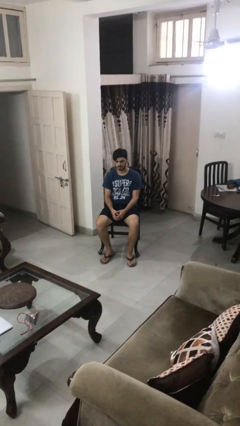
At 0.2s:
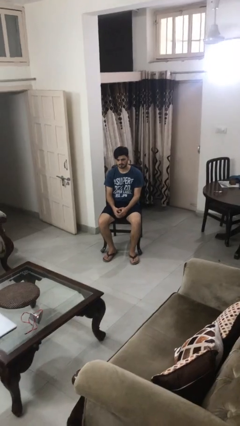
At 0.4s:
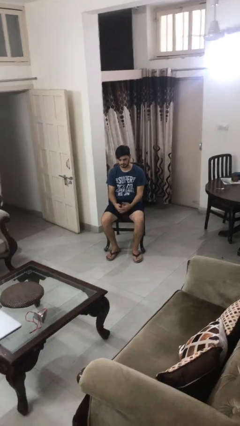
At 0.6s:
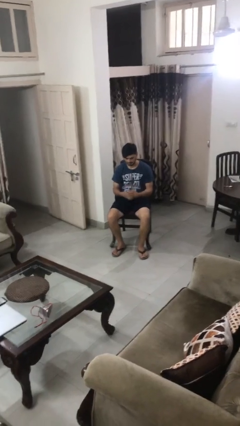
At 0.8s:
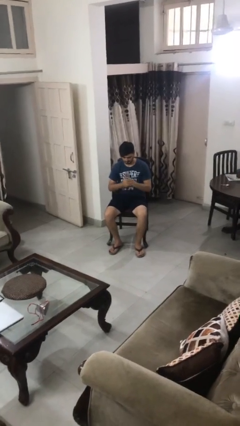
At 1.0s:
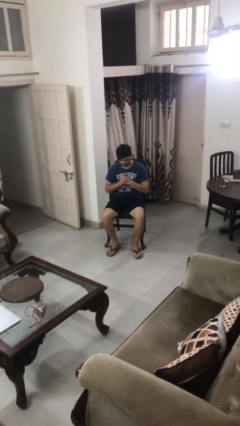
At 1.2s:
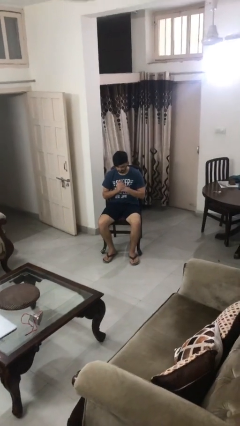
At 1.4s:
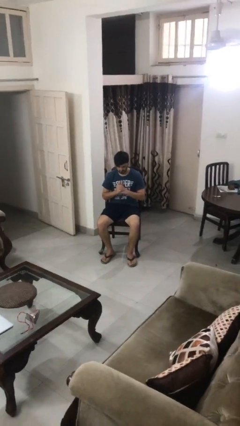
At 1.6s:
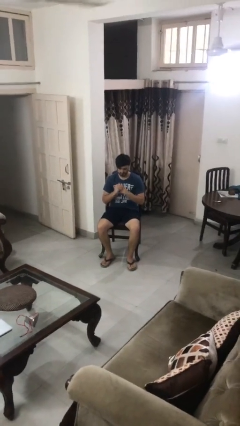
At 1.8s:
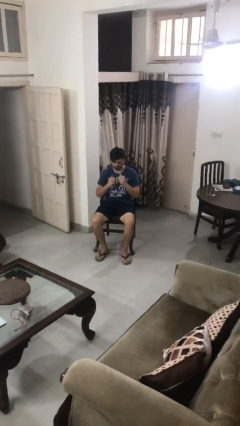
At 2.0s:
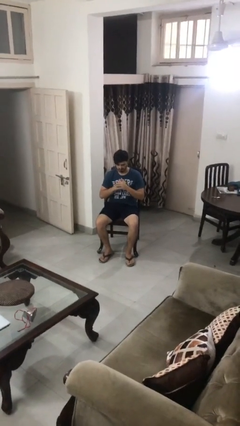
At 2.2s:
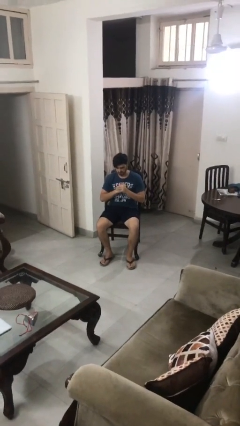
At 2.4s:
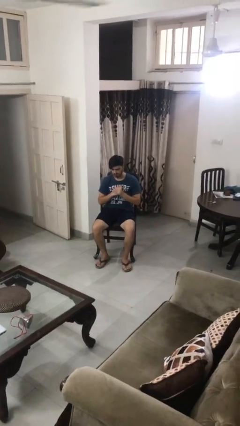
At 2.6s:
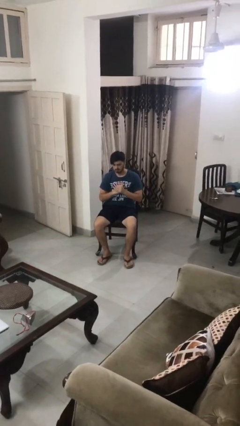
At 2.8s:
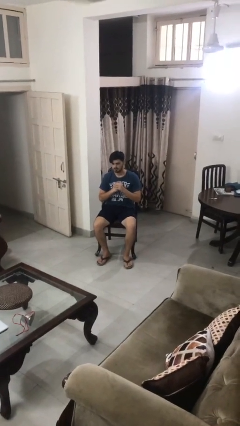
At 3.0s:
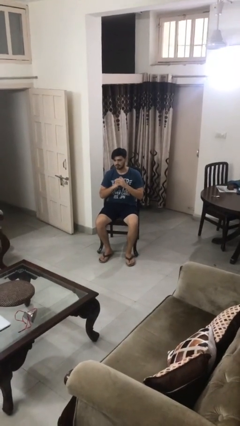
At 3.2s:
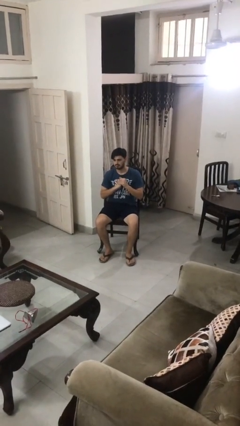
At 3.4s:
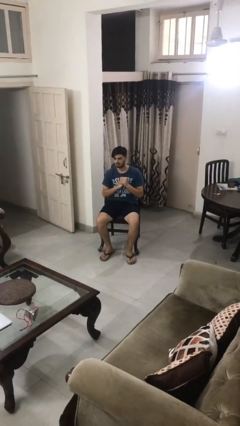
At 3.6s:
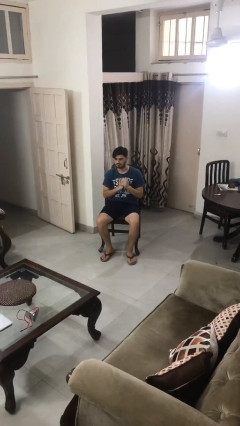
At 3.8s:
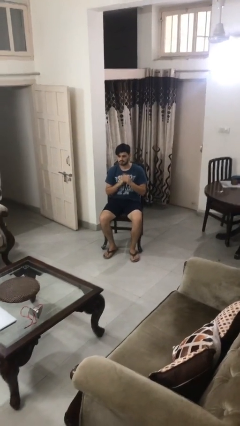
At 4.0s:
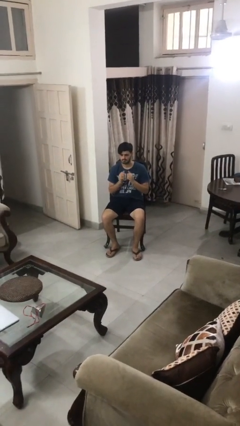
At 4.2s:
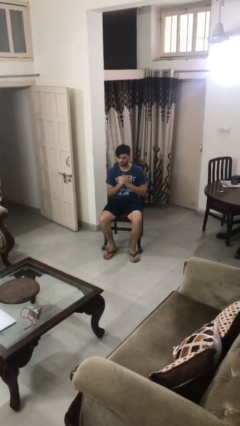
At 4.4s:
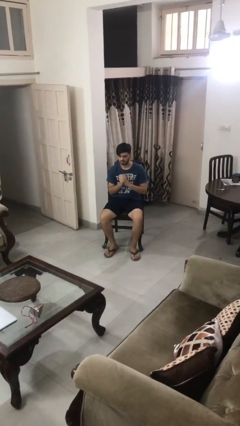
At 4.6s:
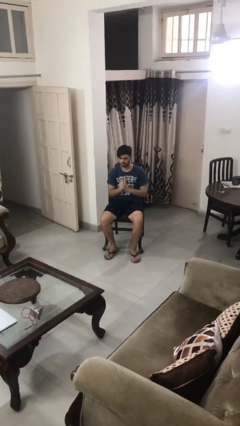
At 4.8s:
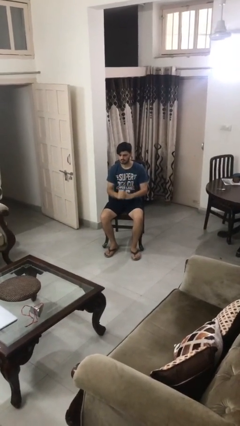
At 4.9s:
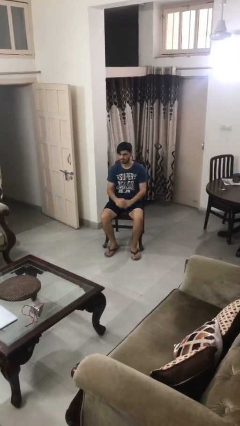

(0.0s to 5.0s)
person cracks knuckles

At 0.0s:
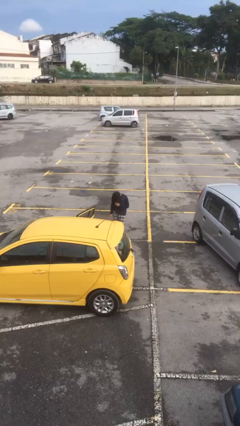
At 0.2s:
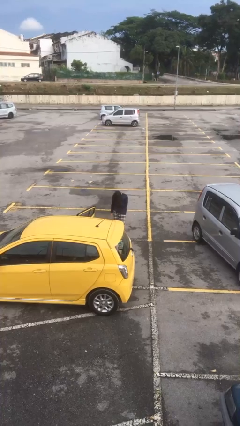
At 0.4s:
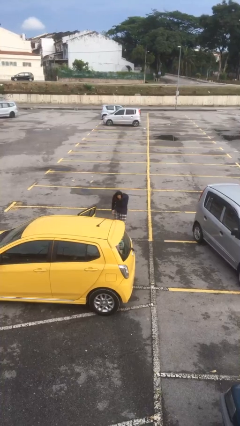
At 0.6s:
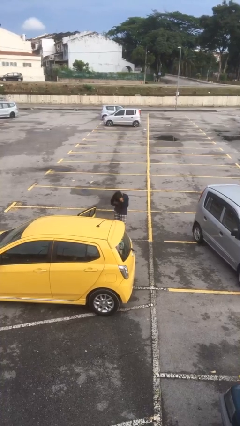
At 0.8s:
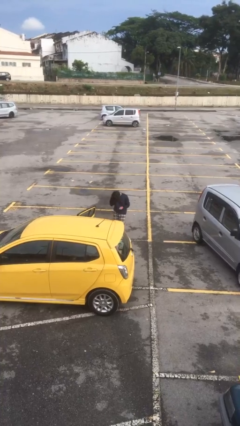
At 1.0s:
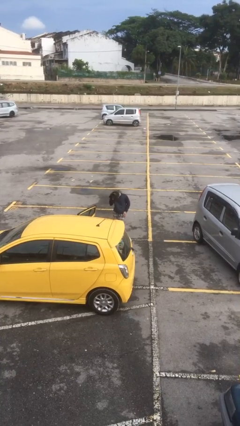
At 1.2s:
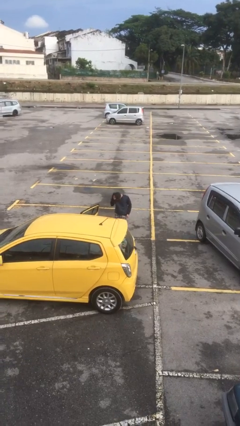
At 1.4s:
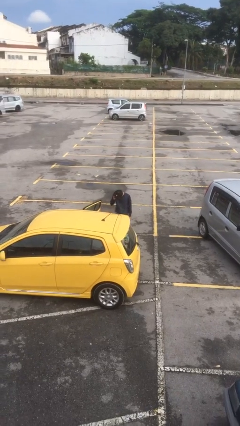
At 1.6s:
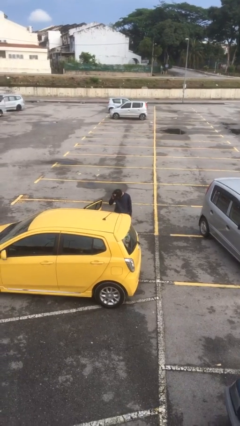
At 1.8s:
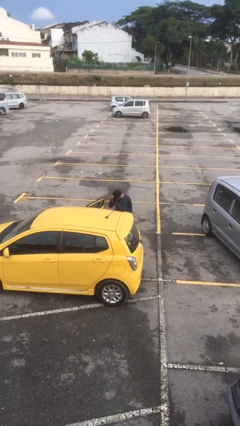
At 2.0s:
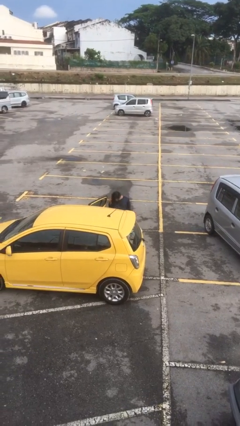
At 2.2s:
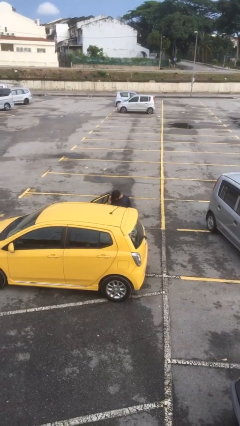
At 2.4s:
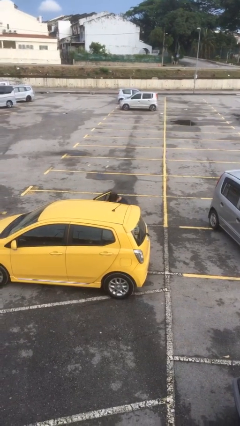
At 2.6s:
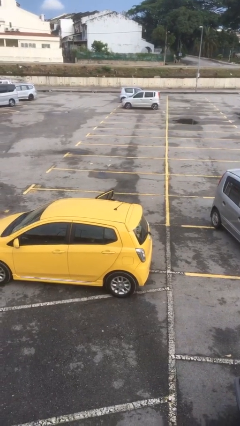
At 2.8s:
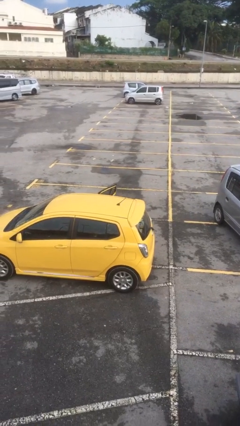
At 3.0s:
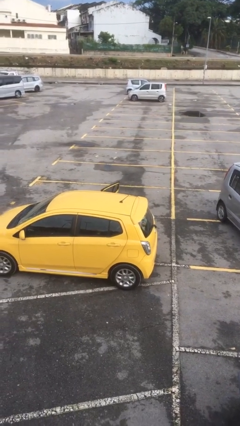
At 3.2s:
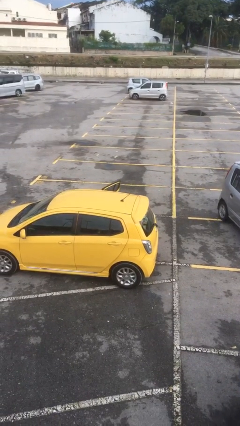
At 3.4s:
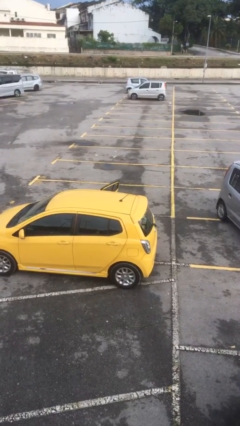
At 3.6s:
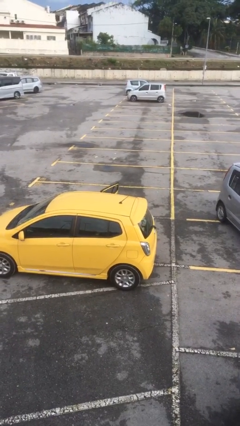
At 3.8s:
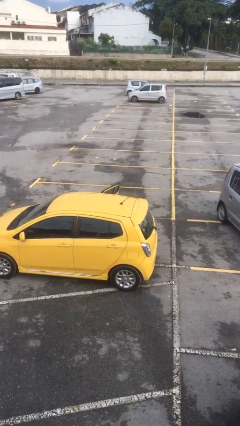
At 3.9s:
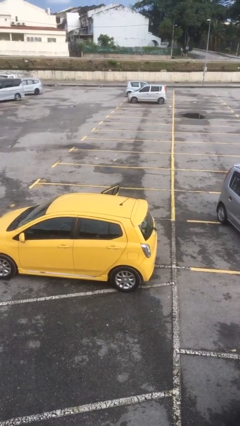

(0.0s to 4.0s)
person enters car

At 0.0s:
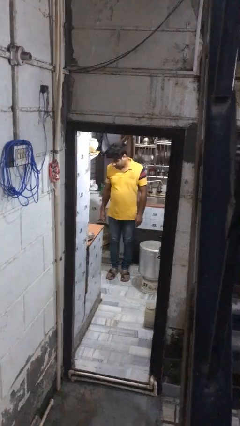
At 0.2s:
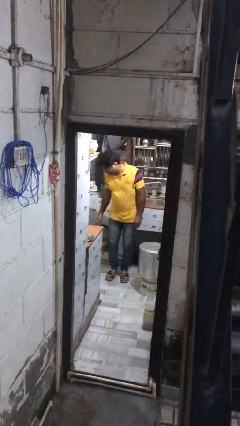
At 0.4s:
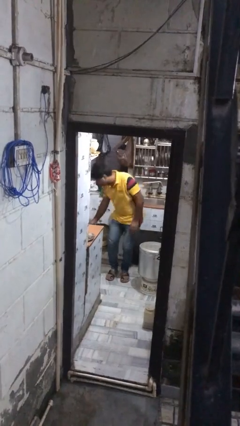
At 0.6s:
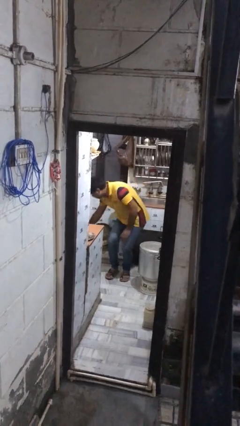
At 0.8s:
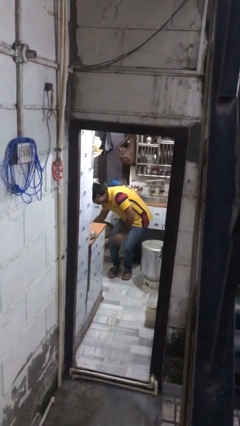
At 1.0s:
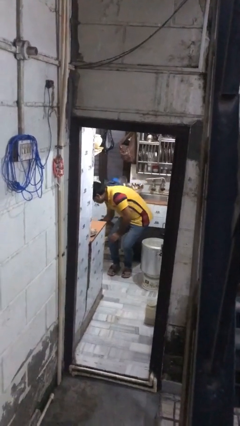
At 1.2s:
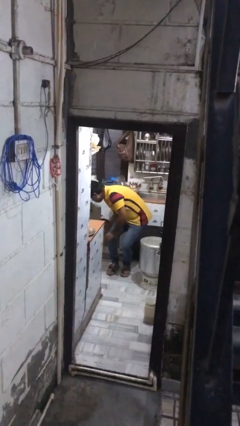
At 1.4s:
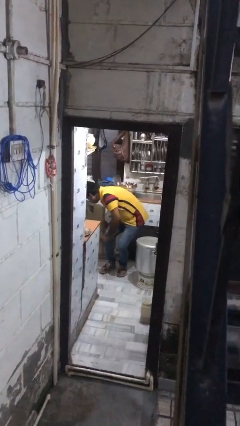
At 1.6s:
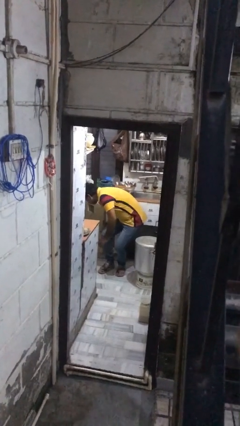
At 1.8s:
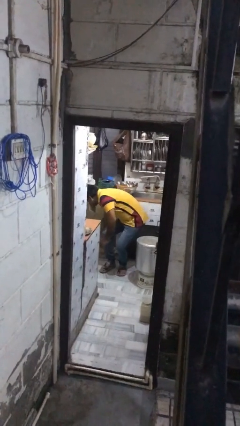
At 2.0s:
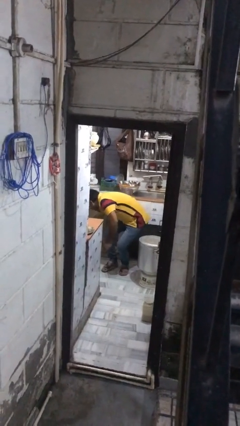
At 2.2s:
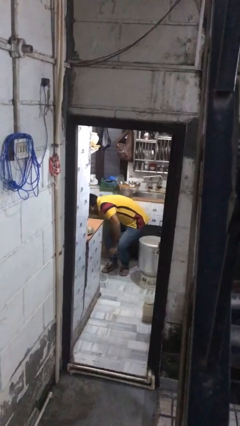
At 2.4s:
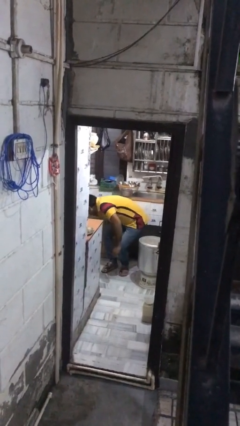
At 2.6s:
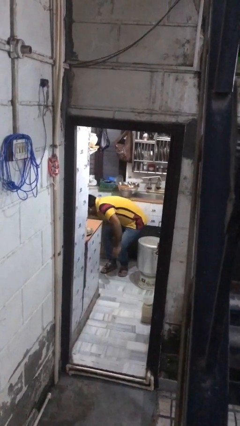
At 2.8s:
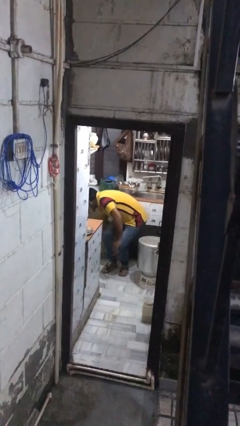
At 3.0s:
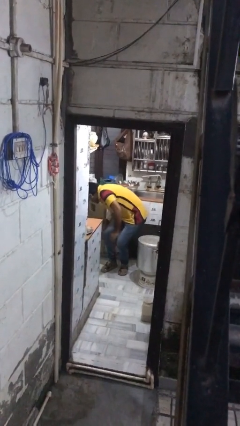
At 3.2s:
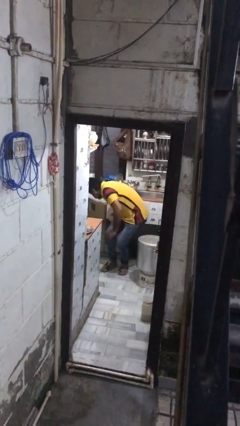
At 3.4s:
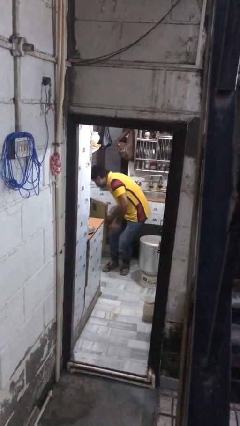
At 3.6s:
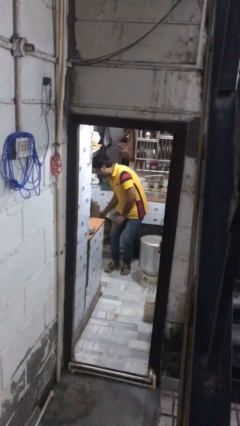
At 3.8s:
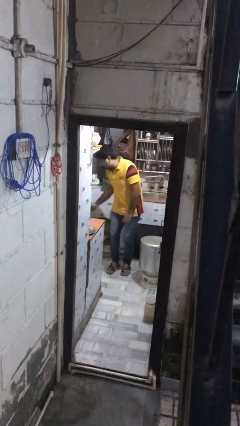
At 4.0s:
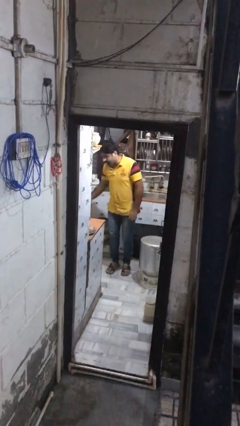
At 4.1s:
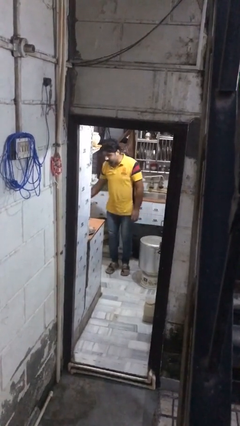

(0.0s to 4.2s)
person searches in kitchen drawer

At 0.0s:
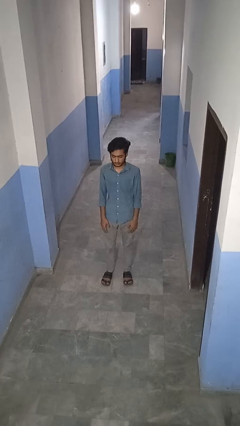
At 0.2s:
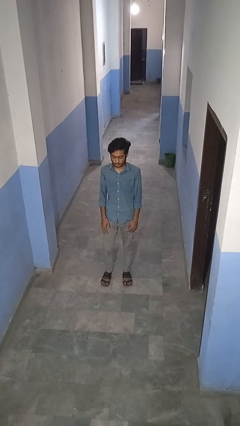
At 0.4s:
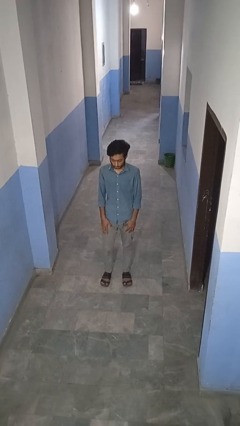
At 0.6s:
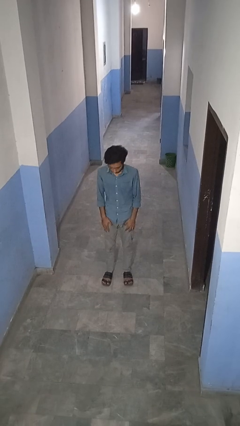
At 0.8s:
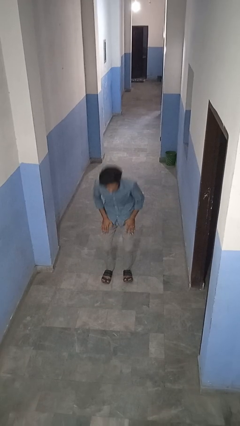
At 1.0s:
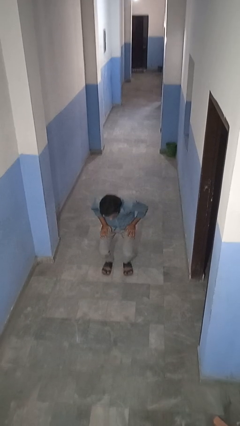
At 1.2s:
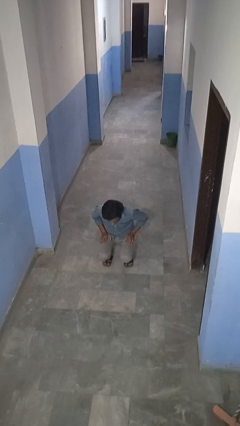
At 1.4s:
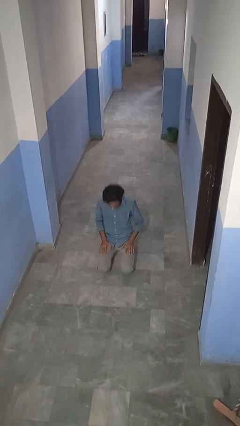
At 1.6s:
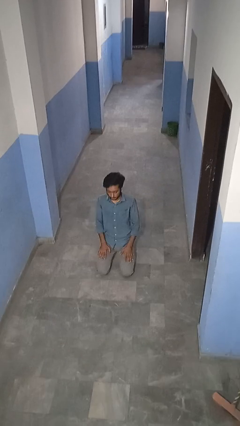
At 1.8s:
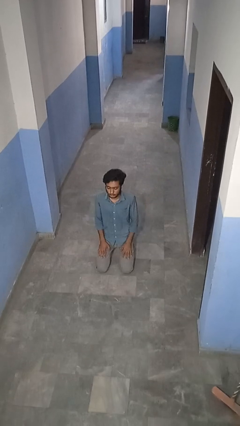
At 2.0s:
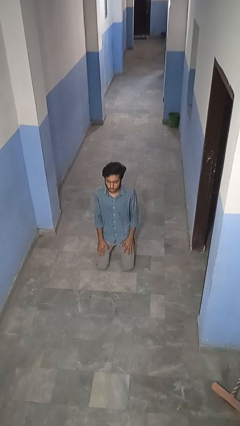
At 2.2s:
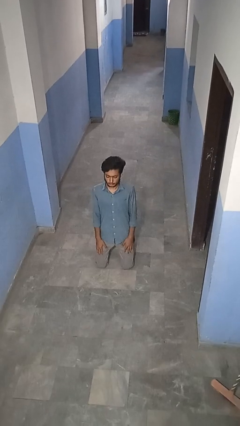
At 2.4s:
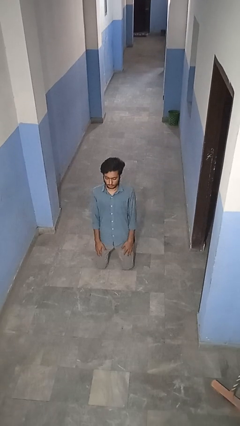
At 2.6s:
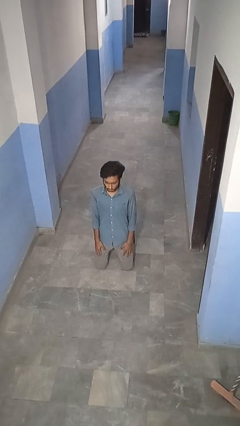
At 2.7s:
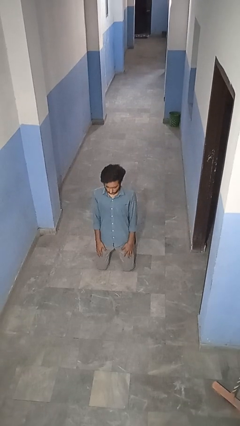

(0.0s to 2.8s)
person kneels

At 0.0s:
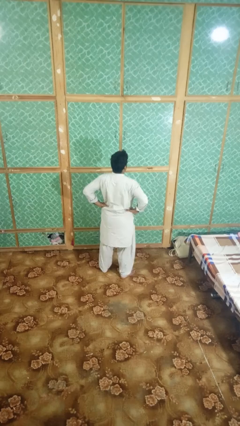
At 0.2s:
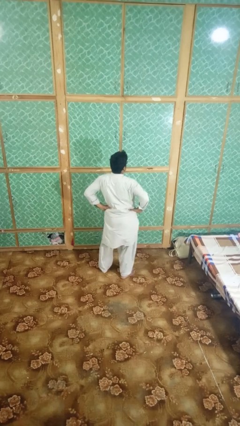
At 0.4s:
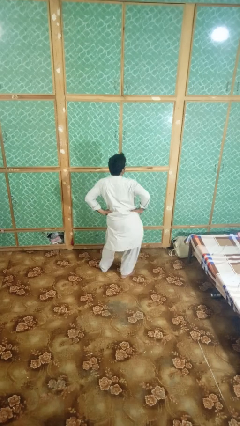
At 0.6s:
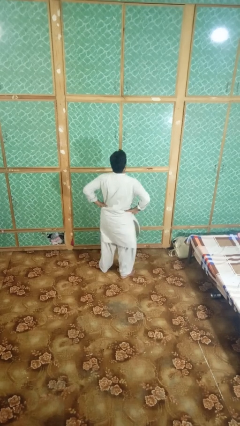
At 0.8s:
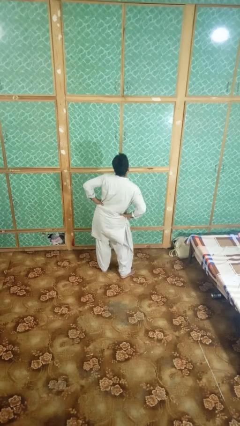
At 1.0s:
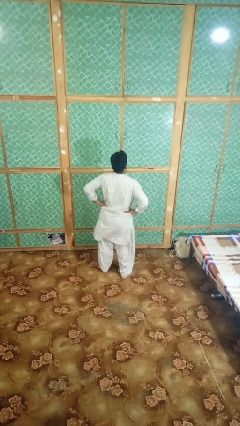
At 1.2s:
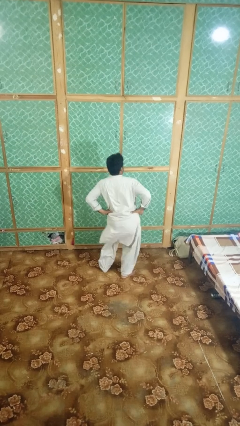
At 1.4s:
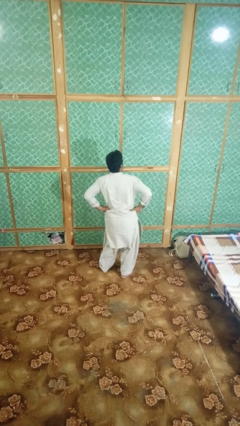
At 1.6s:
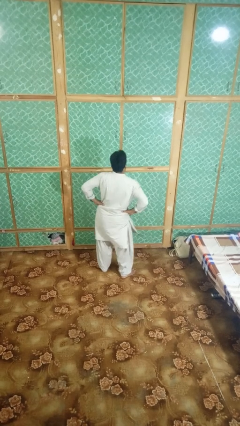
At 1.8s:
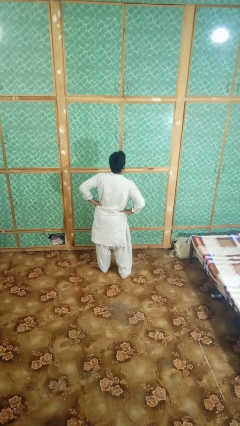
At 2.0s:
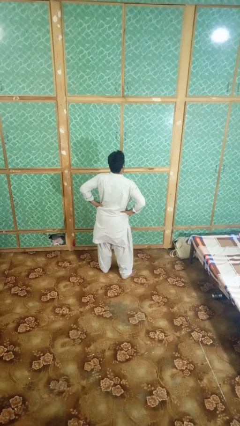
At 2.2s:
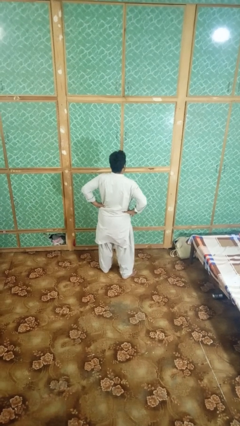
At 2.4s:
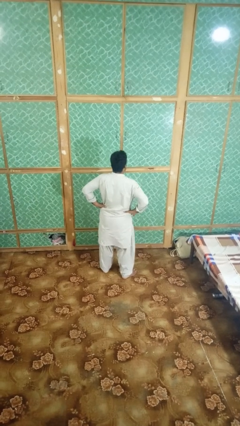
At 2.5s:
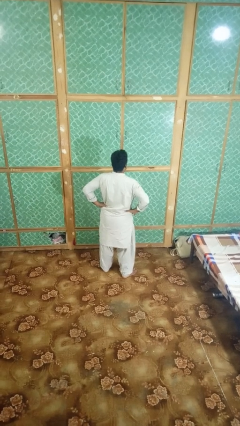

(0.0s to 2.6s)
person wiggles hips
